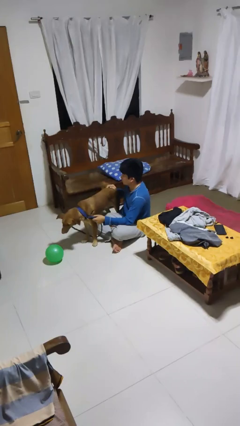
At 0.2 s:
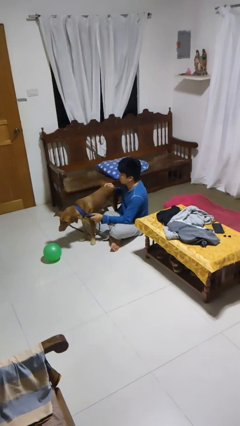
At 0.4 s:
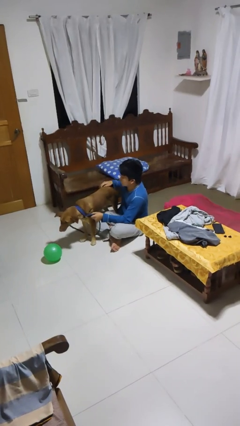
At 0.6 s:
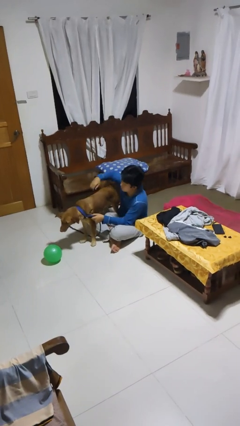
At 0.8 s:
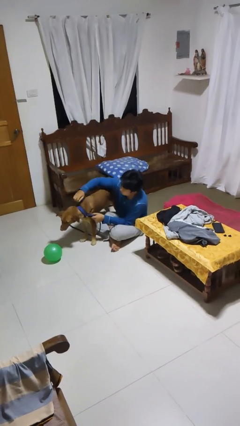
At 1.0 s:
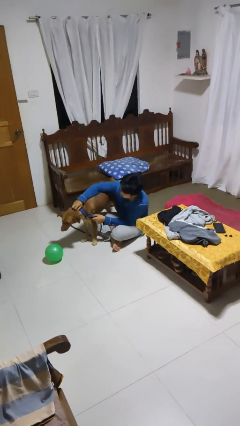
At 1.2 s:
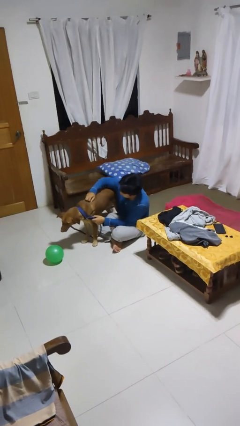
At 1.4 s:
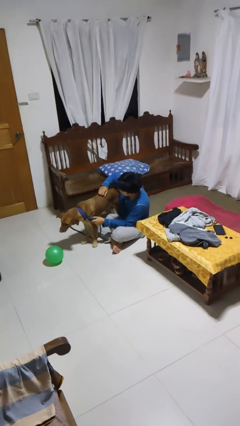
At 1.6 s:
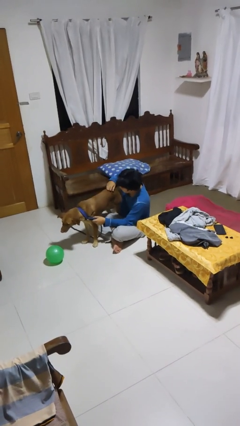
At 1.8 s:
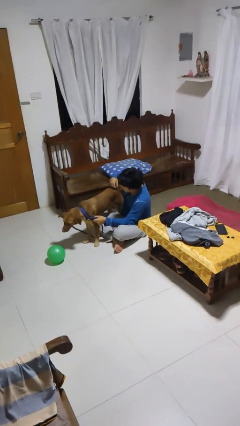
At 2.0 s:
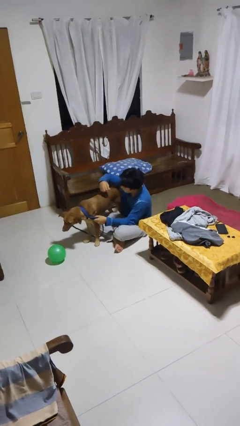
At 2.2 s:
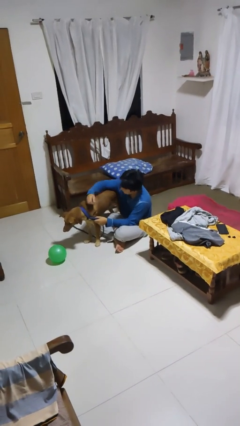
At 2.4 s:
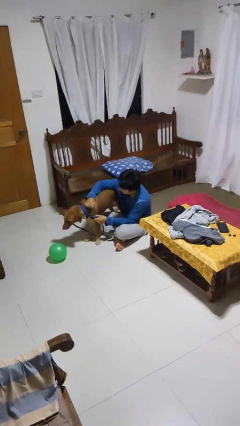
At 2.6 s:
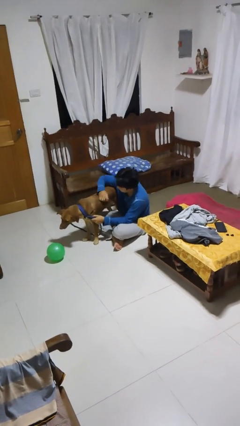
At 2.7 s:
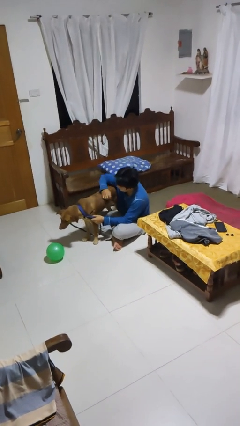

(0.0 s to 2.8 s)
person pets dog

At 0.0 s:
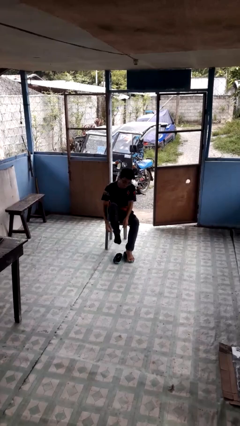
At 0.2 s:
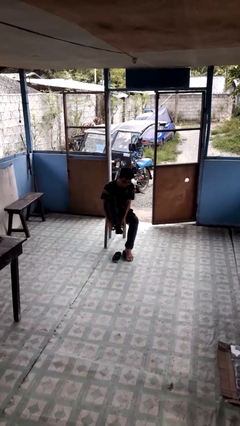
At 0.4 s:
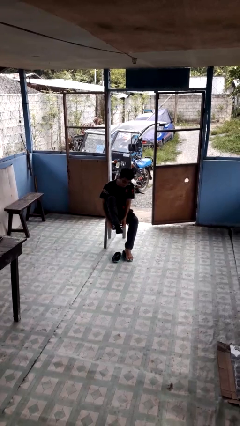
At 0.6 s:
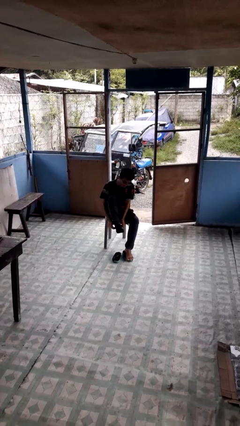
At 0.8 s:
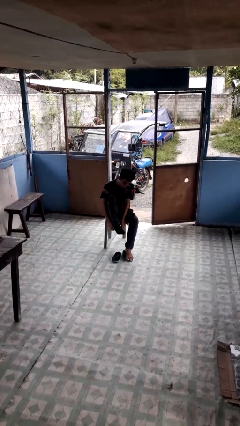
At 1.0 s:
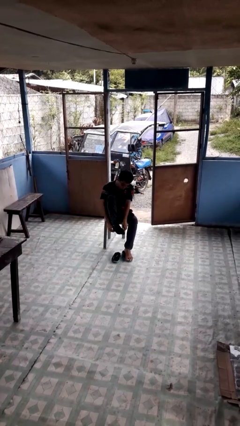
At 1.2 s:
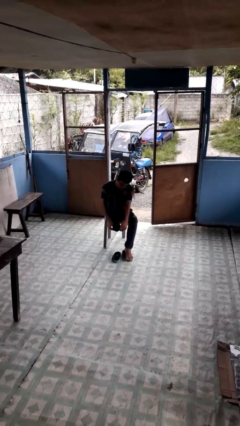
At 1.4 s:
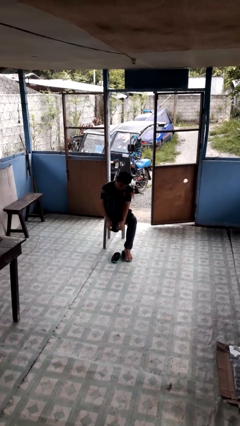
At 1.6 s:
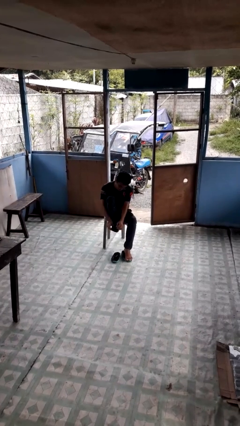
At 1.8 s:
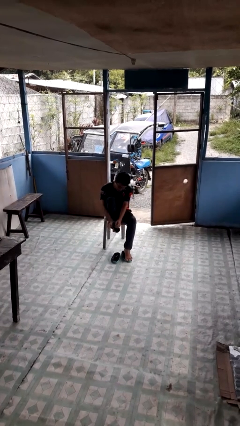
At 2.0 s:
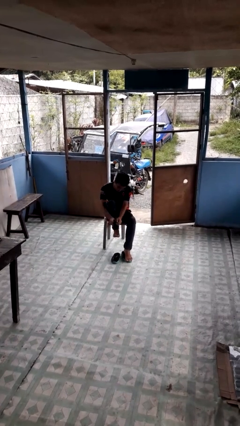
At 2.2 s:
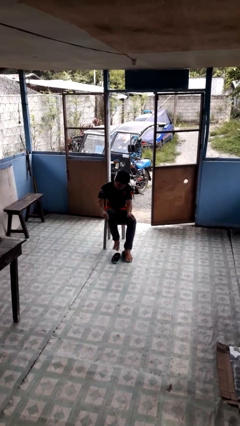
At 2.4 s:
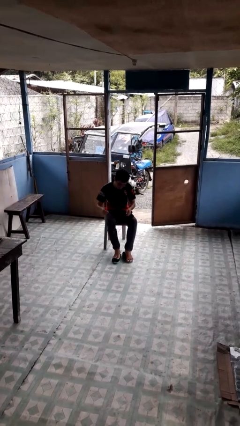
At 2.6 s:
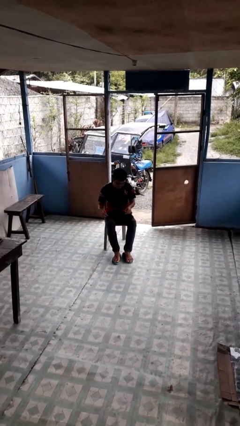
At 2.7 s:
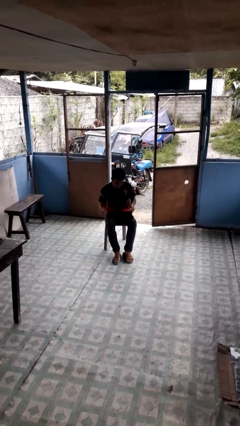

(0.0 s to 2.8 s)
person takes off socks

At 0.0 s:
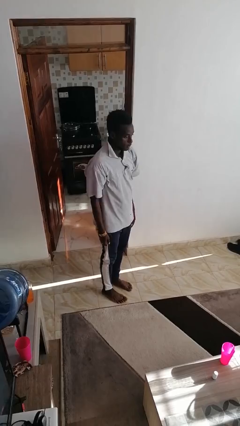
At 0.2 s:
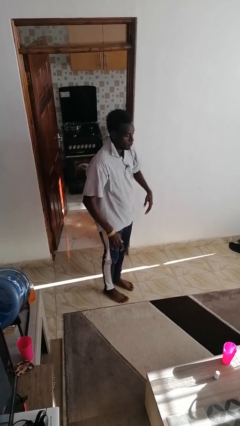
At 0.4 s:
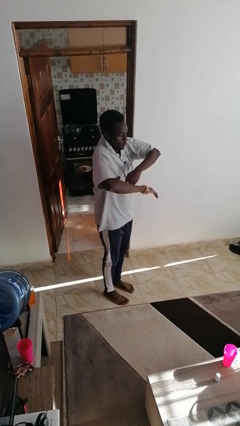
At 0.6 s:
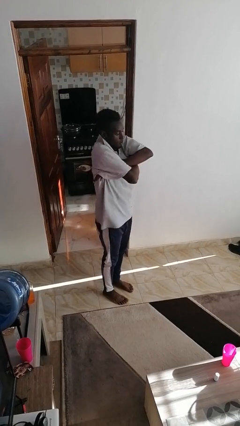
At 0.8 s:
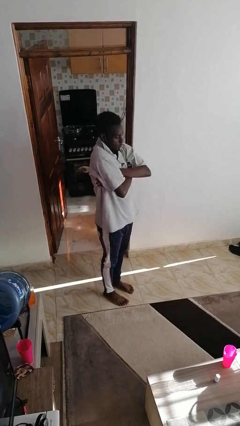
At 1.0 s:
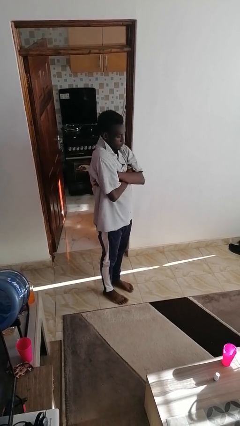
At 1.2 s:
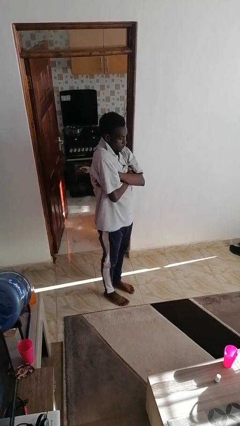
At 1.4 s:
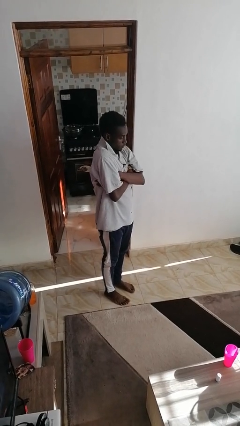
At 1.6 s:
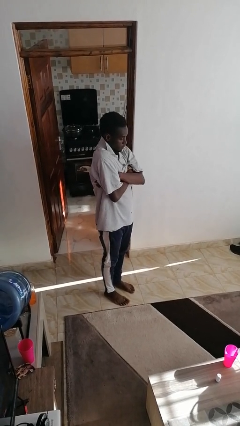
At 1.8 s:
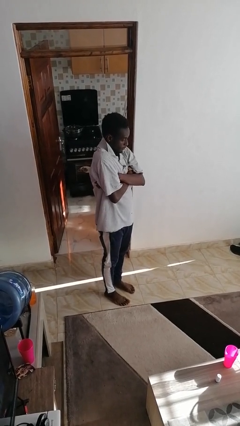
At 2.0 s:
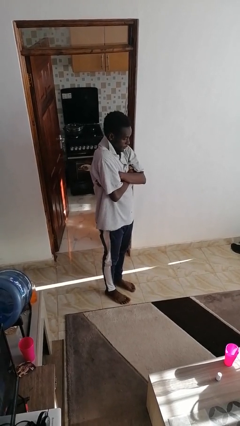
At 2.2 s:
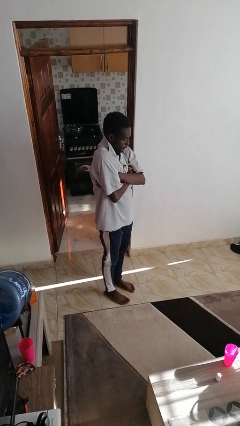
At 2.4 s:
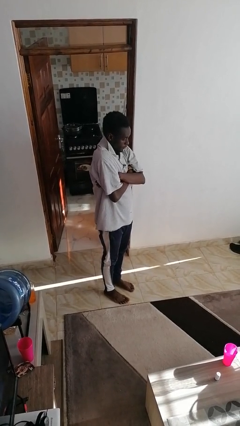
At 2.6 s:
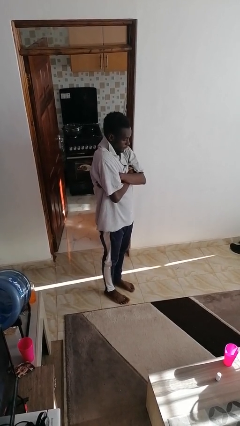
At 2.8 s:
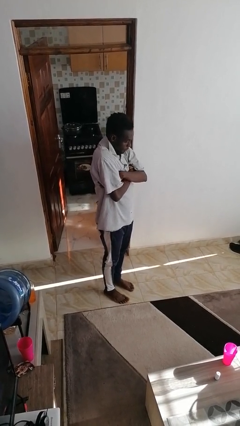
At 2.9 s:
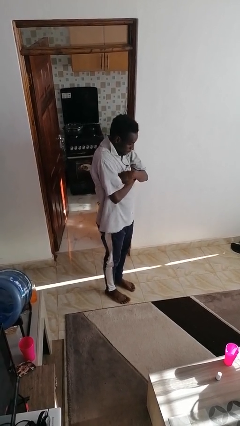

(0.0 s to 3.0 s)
person crosses arms

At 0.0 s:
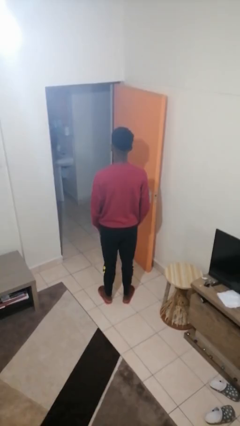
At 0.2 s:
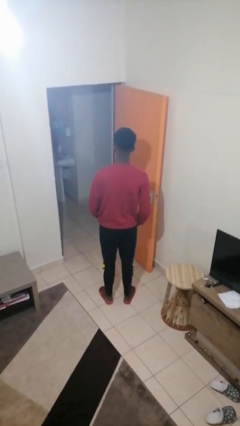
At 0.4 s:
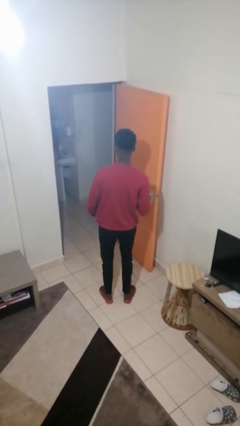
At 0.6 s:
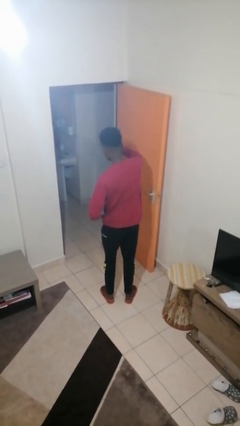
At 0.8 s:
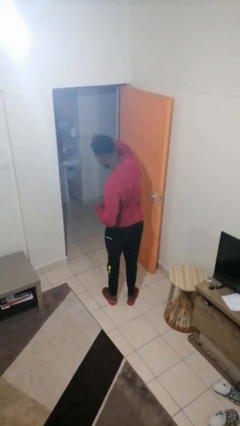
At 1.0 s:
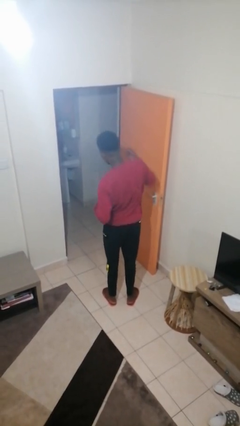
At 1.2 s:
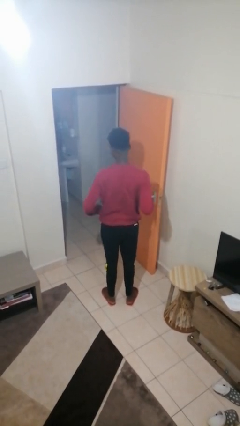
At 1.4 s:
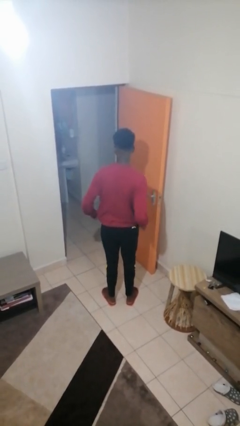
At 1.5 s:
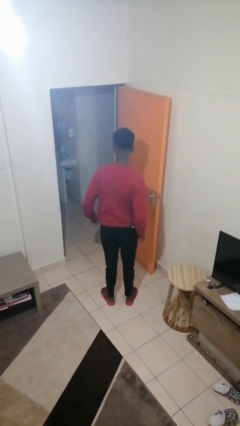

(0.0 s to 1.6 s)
person punches

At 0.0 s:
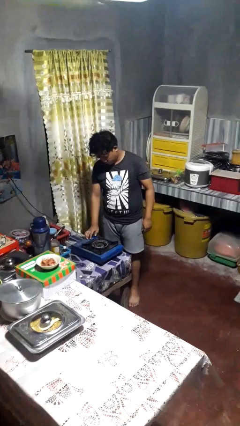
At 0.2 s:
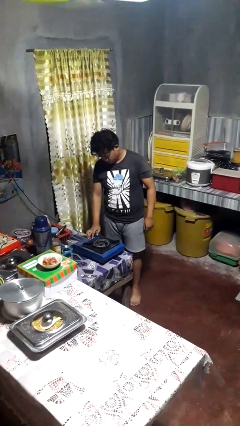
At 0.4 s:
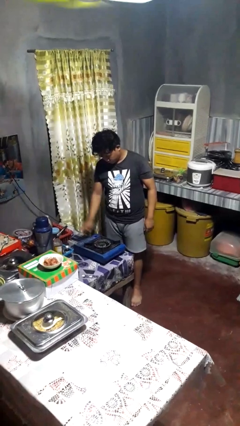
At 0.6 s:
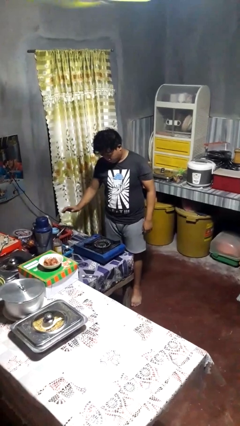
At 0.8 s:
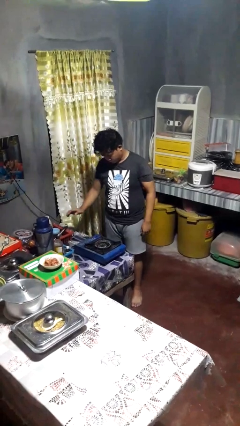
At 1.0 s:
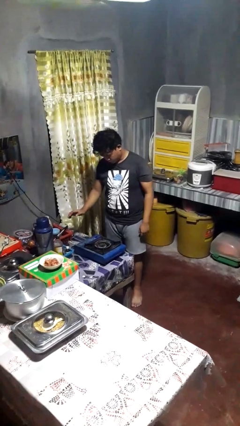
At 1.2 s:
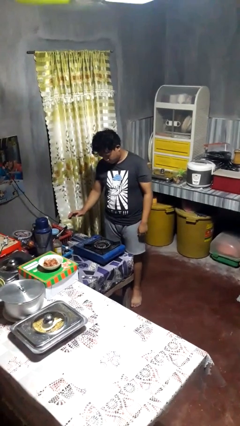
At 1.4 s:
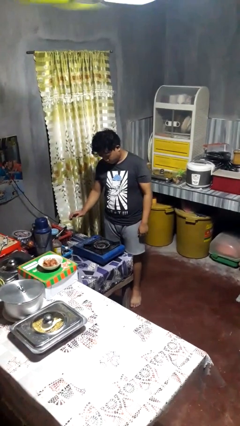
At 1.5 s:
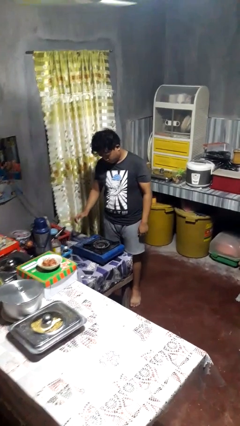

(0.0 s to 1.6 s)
person burns hand

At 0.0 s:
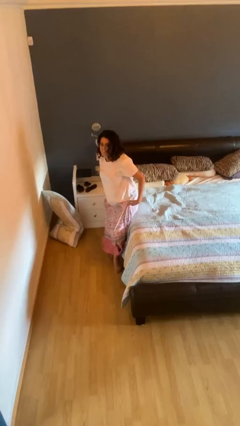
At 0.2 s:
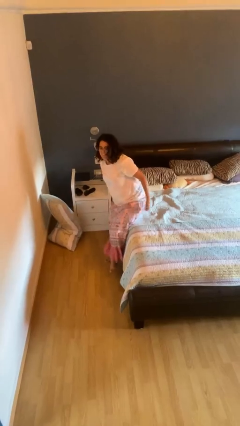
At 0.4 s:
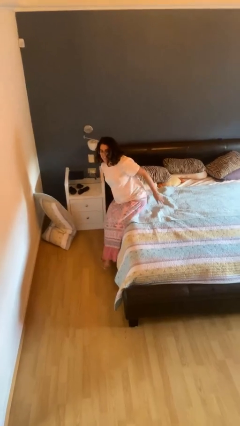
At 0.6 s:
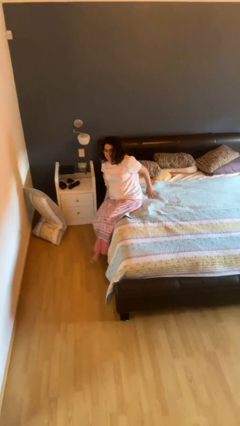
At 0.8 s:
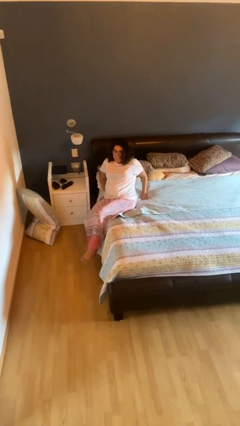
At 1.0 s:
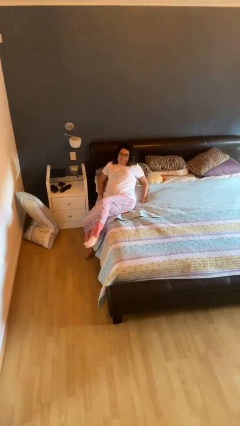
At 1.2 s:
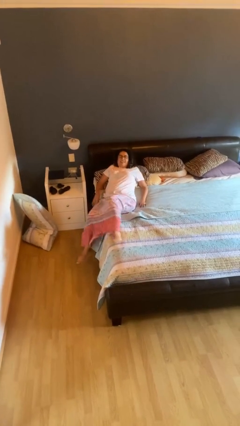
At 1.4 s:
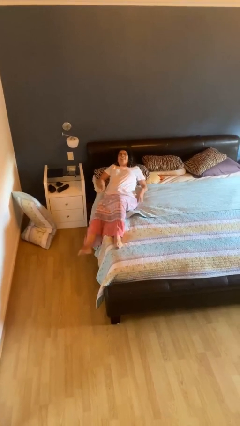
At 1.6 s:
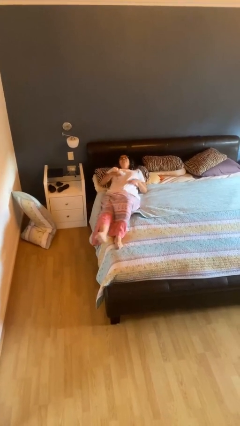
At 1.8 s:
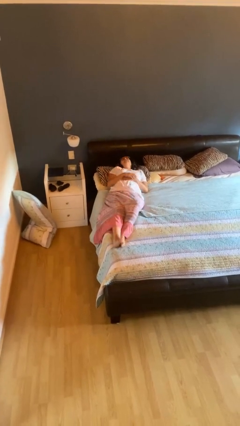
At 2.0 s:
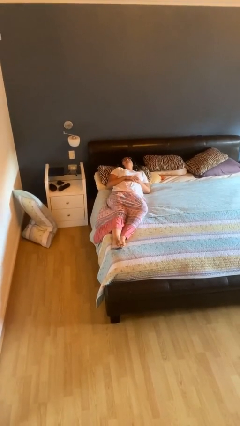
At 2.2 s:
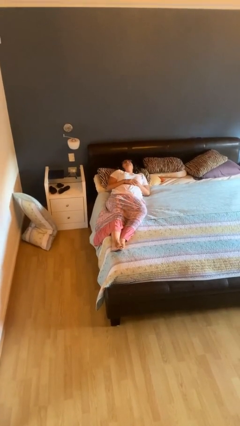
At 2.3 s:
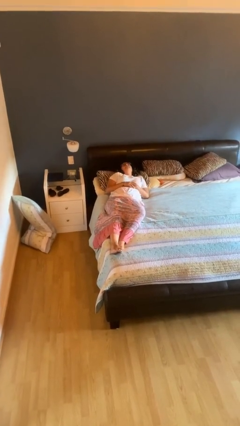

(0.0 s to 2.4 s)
person lies down on bed

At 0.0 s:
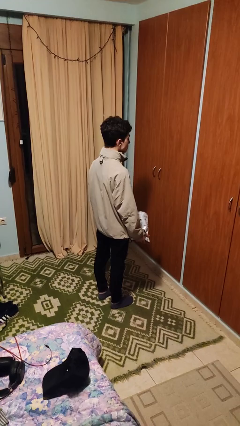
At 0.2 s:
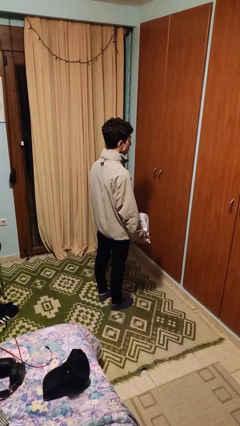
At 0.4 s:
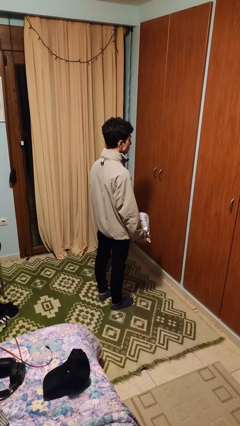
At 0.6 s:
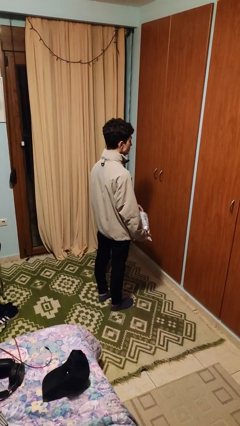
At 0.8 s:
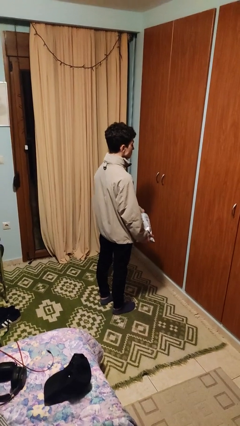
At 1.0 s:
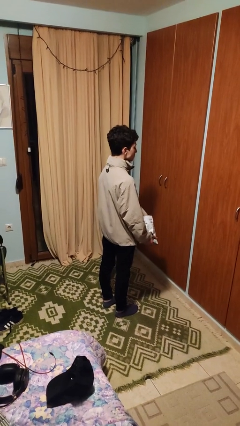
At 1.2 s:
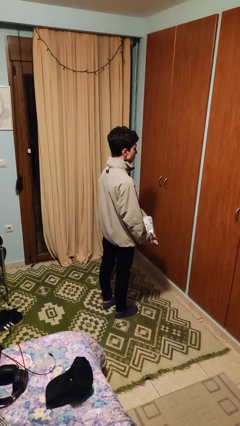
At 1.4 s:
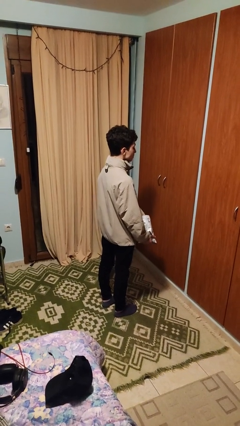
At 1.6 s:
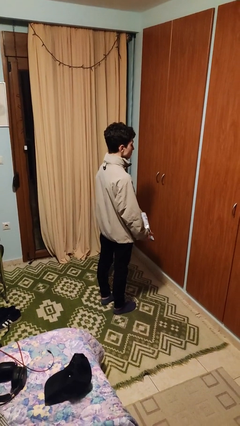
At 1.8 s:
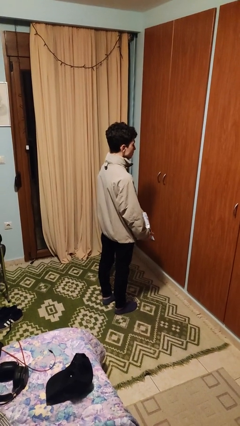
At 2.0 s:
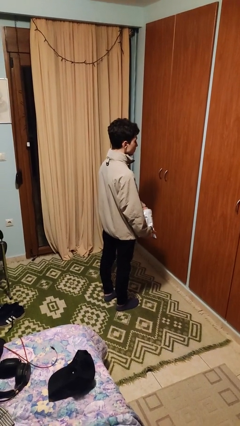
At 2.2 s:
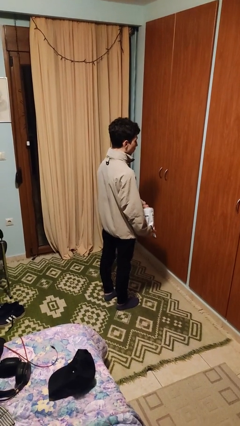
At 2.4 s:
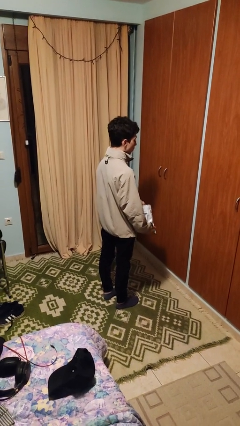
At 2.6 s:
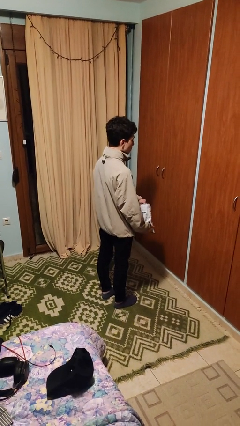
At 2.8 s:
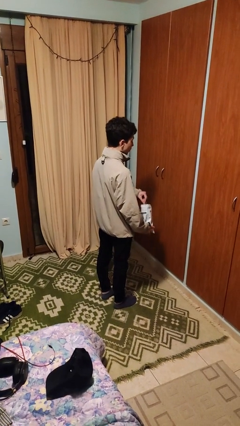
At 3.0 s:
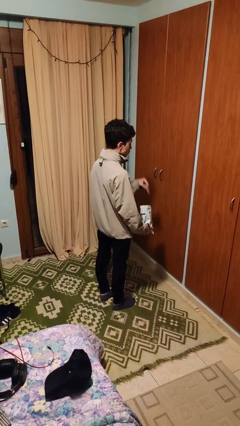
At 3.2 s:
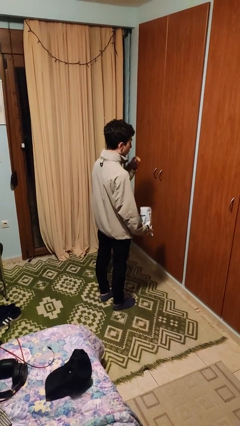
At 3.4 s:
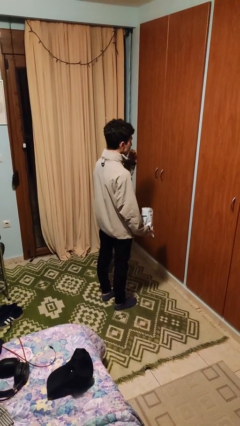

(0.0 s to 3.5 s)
person eats snack from bag
